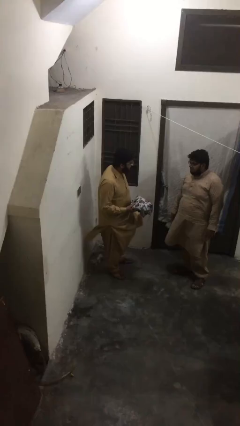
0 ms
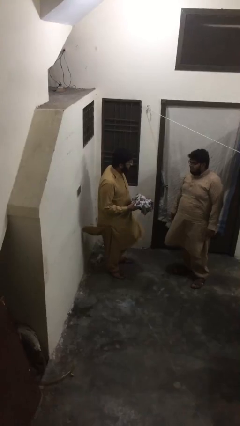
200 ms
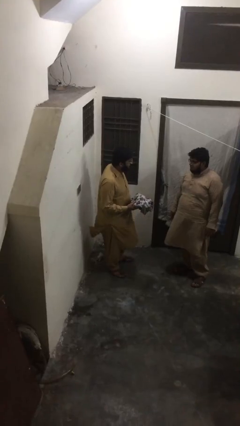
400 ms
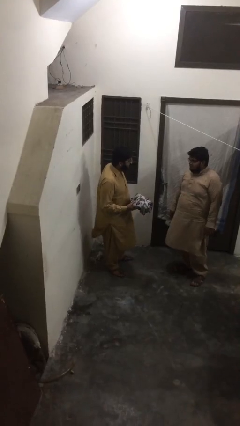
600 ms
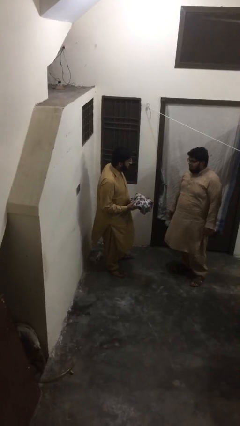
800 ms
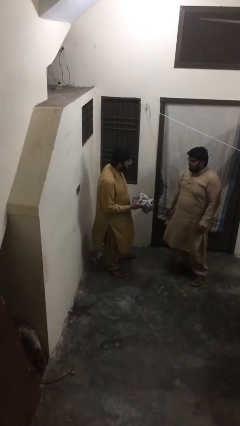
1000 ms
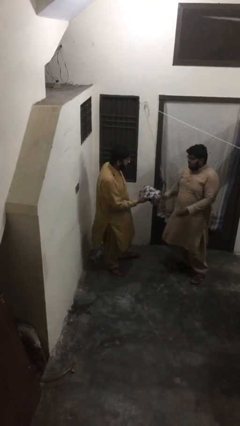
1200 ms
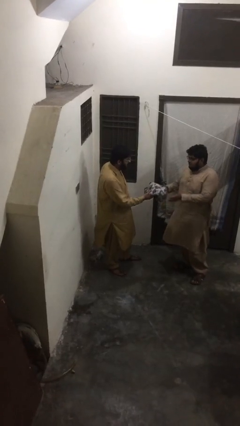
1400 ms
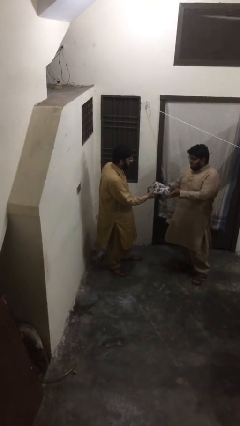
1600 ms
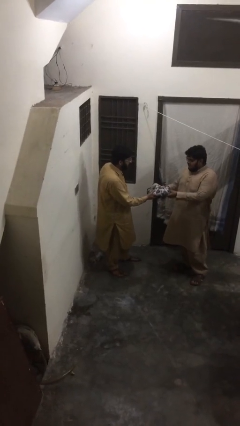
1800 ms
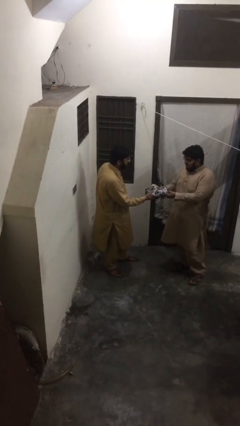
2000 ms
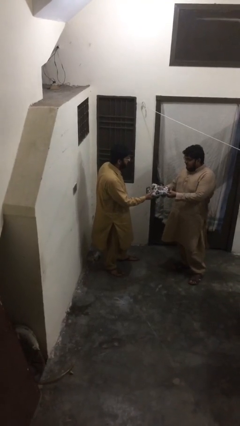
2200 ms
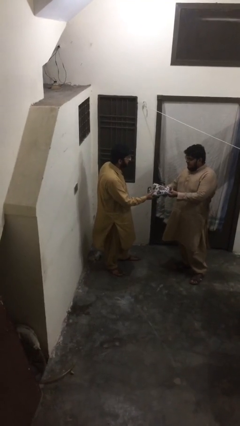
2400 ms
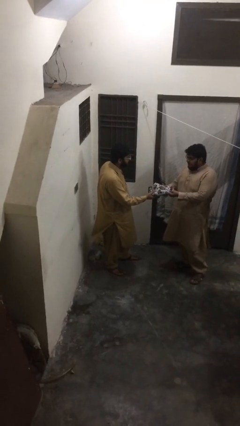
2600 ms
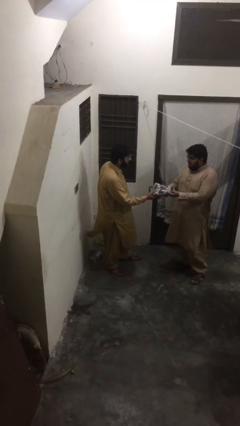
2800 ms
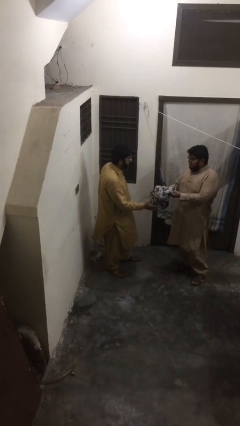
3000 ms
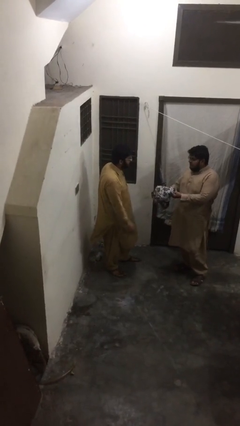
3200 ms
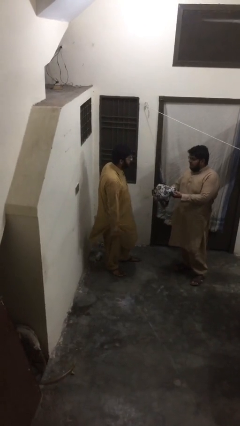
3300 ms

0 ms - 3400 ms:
person transfers object to person

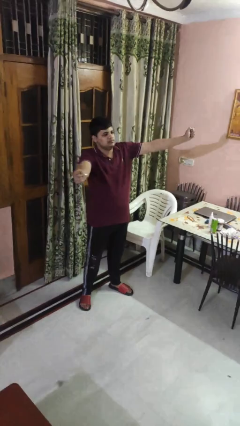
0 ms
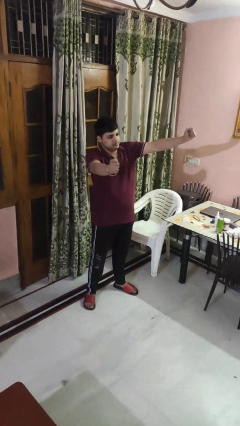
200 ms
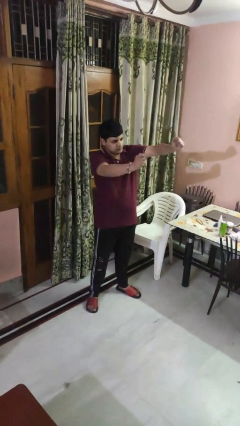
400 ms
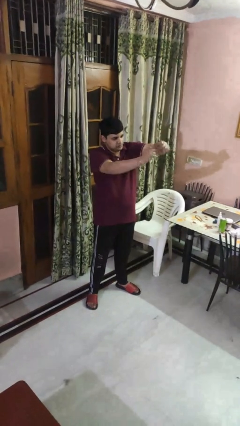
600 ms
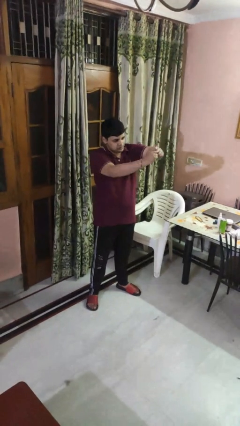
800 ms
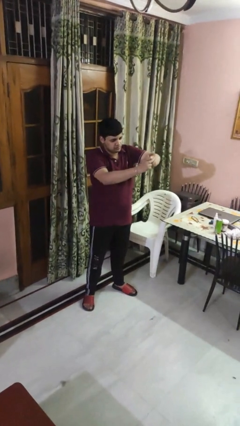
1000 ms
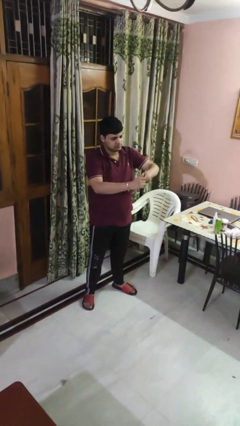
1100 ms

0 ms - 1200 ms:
person gestures zoom out

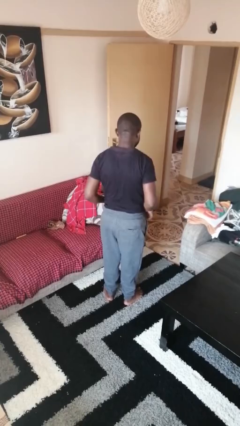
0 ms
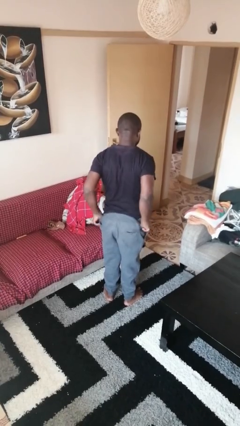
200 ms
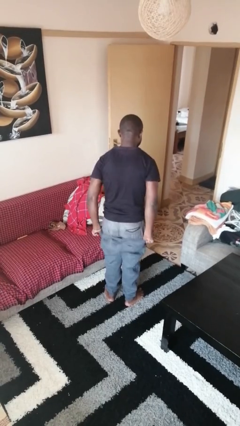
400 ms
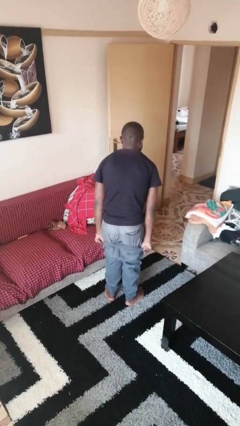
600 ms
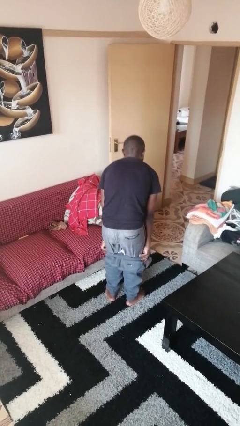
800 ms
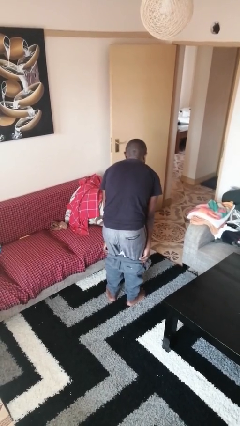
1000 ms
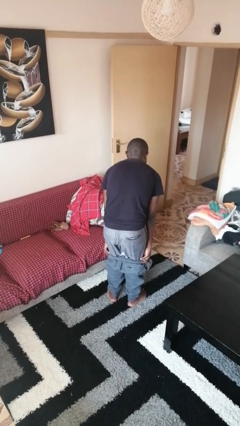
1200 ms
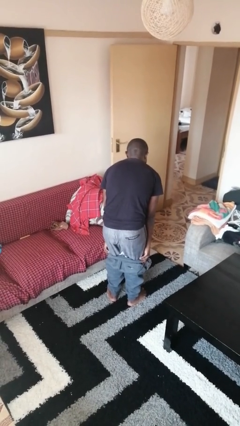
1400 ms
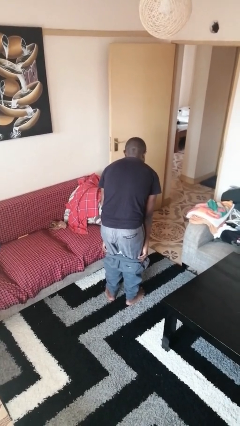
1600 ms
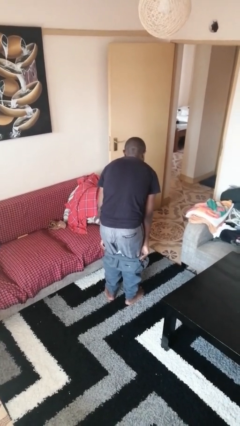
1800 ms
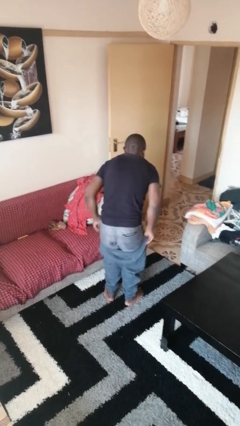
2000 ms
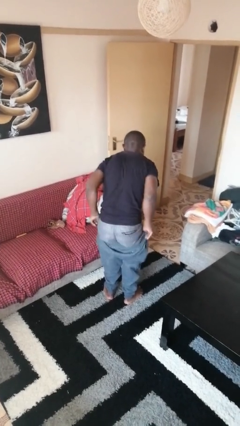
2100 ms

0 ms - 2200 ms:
person takes off pants

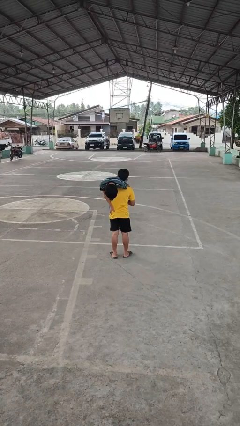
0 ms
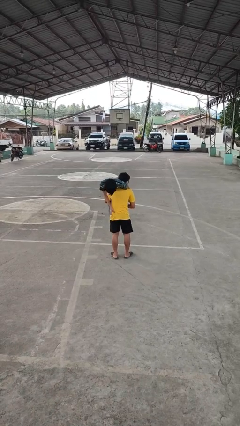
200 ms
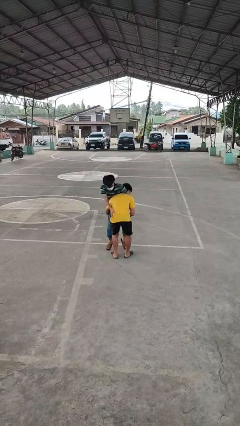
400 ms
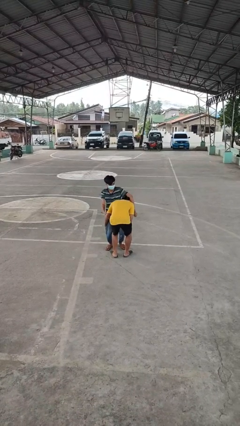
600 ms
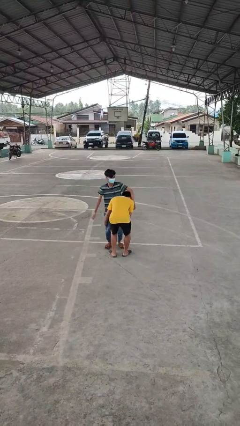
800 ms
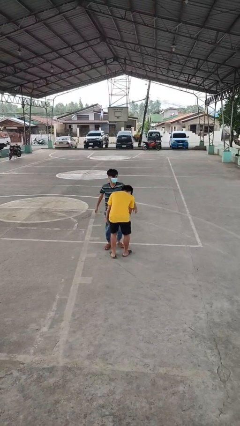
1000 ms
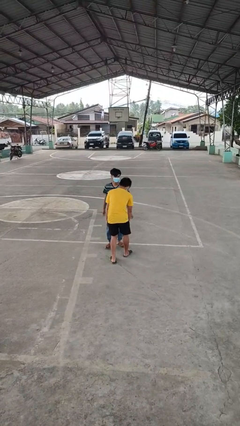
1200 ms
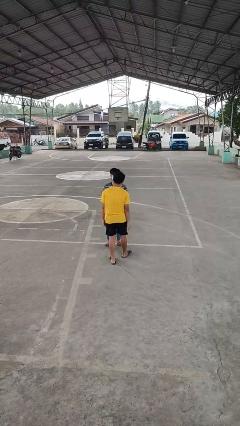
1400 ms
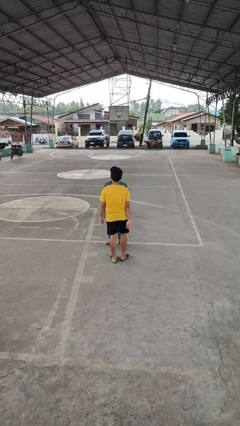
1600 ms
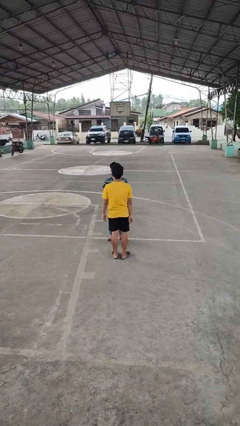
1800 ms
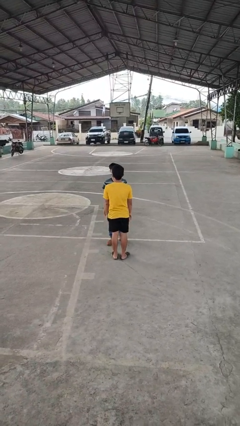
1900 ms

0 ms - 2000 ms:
person puts down person

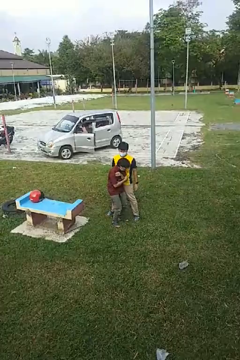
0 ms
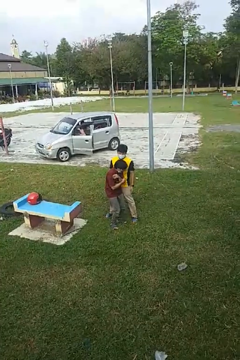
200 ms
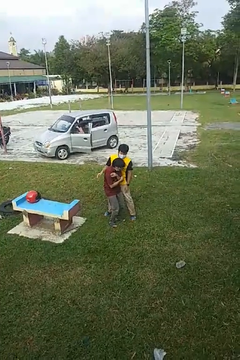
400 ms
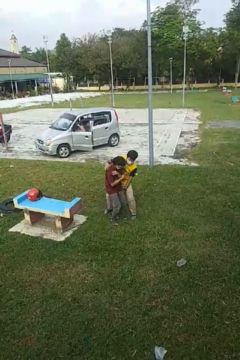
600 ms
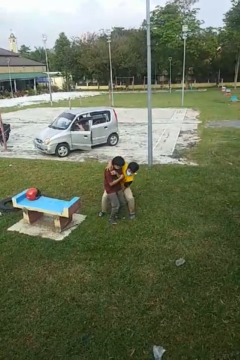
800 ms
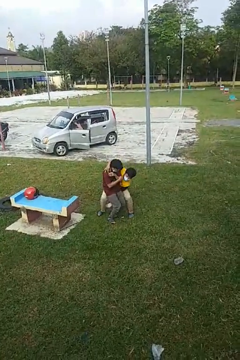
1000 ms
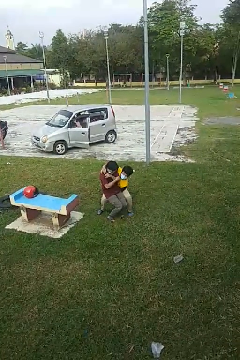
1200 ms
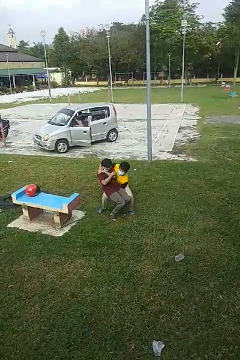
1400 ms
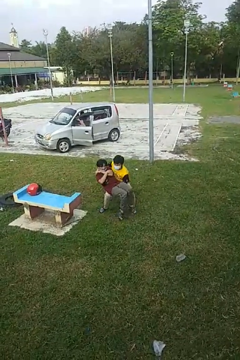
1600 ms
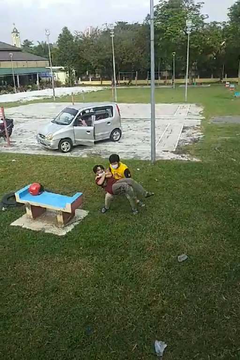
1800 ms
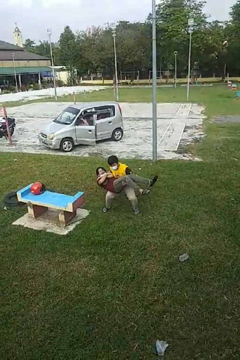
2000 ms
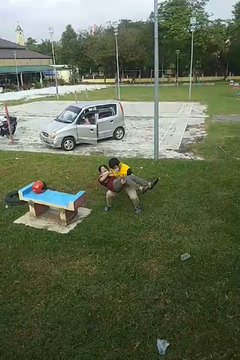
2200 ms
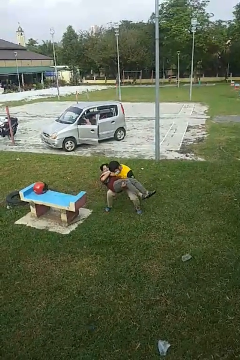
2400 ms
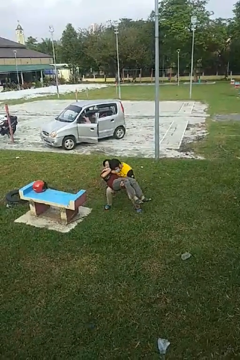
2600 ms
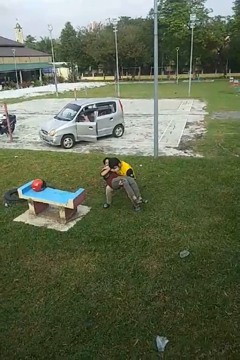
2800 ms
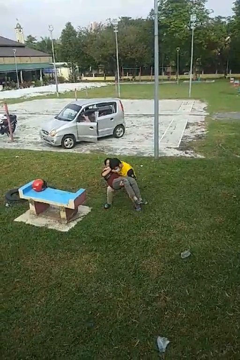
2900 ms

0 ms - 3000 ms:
person picks up person

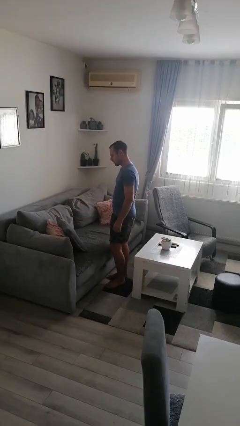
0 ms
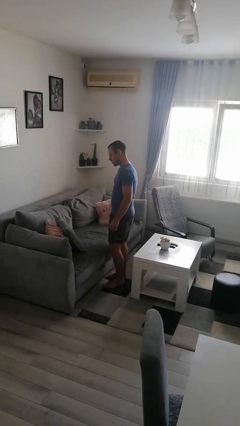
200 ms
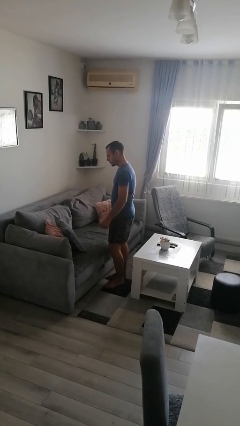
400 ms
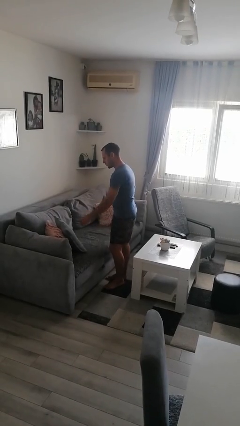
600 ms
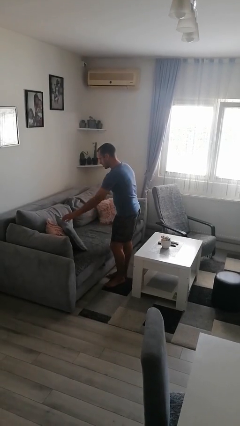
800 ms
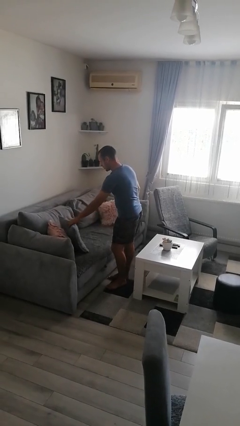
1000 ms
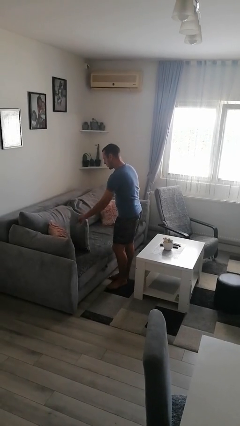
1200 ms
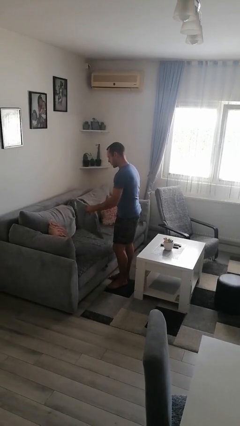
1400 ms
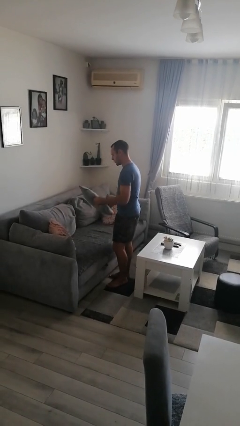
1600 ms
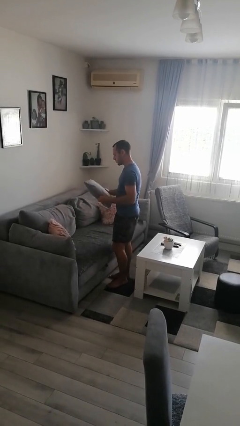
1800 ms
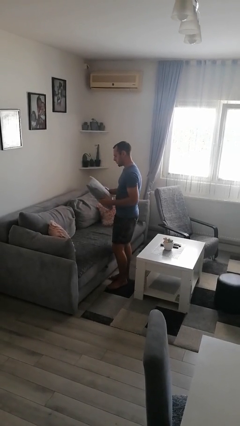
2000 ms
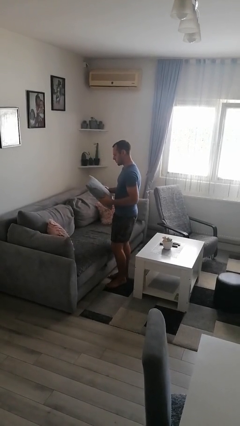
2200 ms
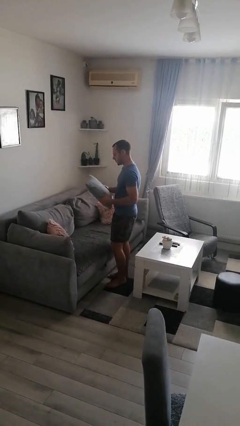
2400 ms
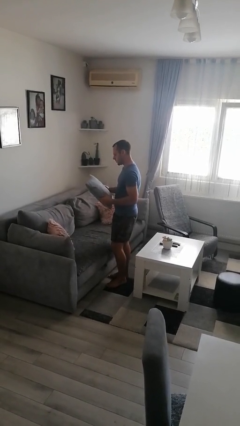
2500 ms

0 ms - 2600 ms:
person picks up object from couch

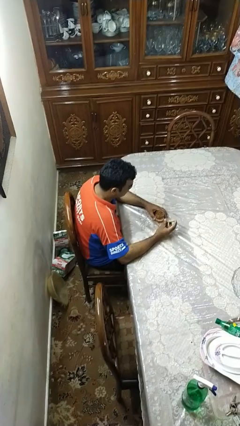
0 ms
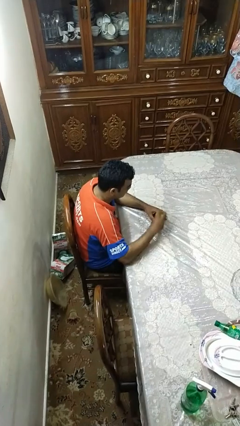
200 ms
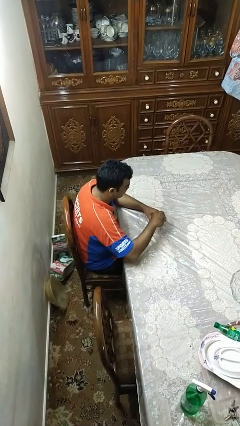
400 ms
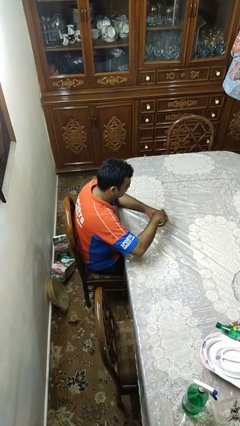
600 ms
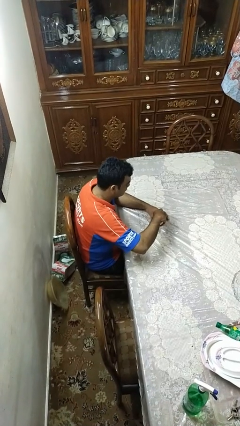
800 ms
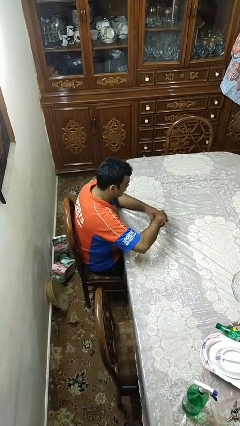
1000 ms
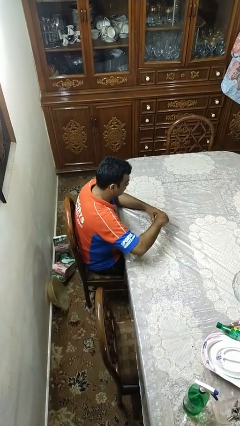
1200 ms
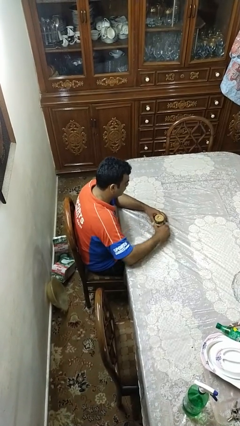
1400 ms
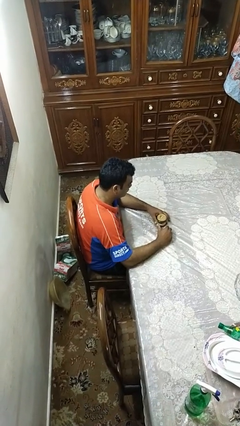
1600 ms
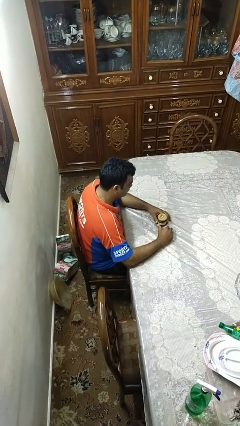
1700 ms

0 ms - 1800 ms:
person closes jar

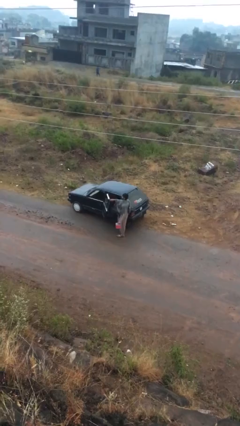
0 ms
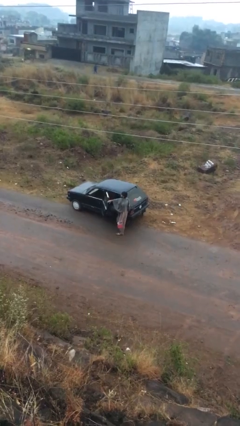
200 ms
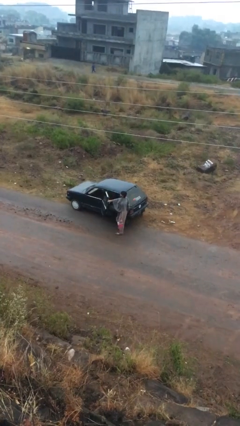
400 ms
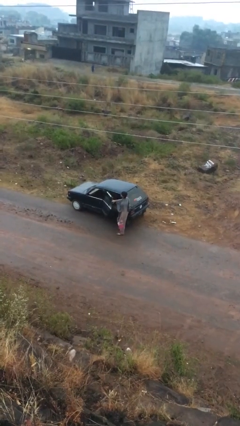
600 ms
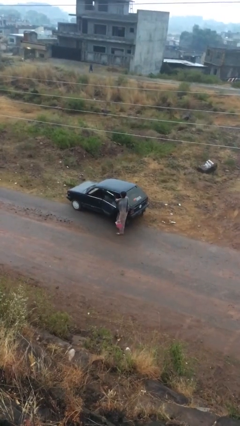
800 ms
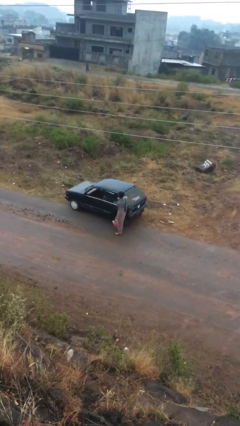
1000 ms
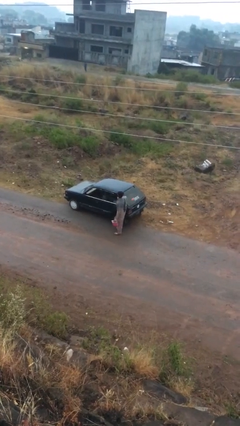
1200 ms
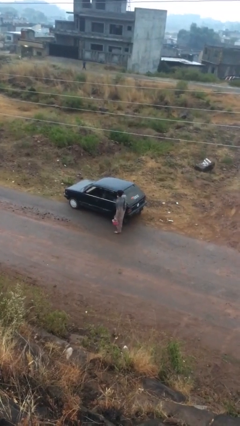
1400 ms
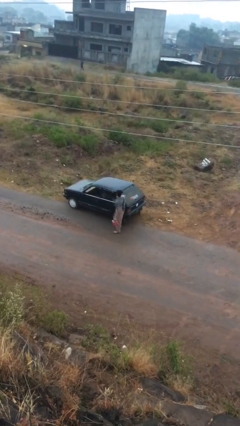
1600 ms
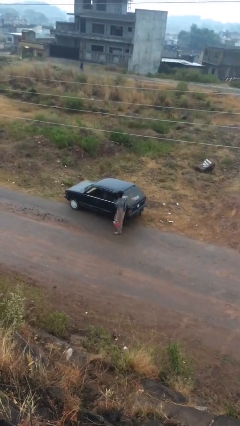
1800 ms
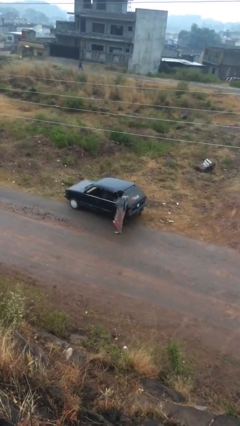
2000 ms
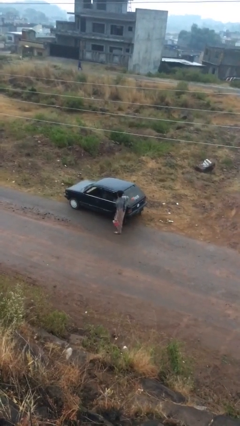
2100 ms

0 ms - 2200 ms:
person closes car door
